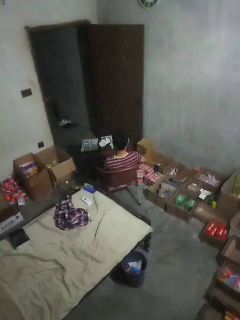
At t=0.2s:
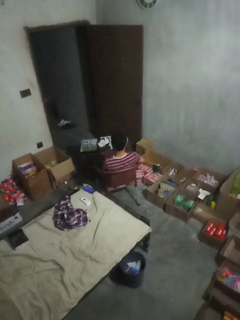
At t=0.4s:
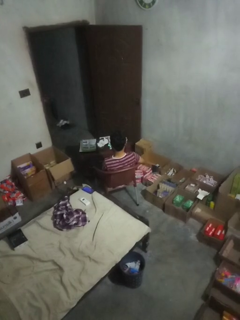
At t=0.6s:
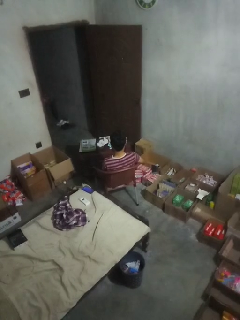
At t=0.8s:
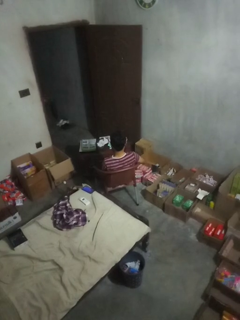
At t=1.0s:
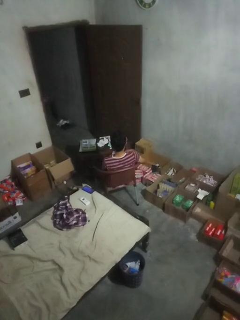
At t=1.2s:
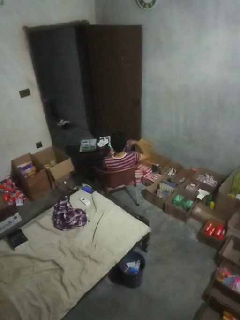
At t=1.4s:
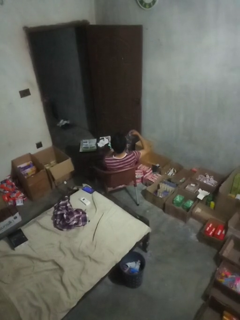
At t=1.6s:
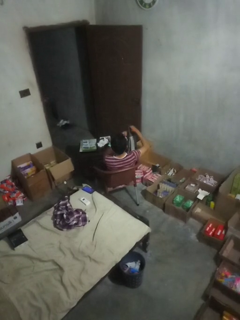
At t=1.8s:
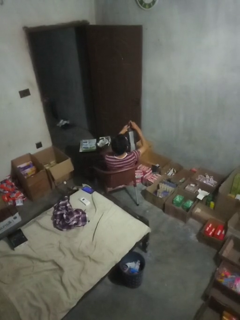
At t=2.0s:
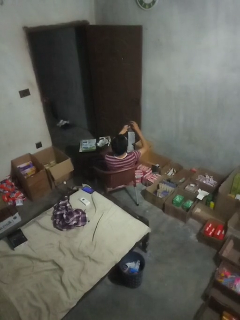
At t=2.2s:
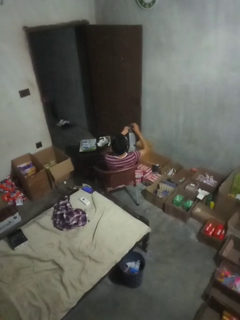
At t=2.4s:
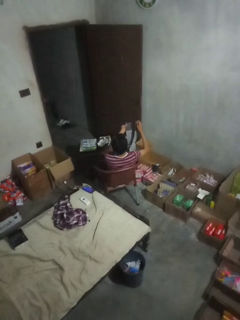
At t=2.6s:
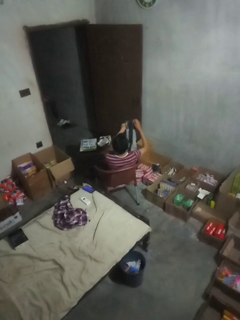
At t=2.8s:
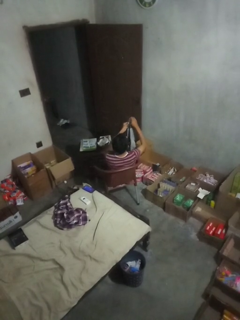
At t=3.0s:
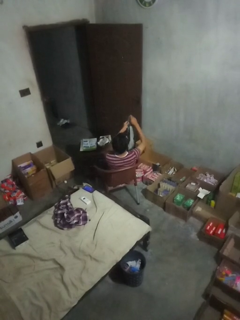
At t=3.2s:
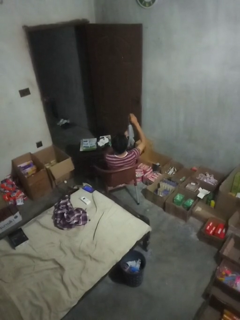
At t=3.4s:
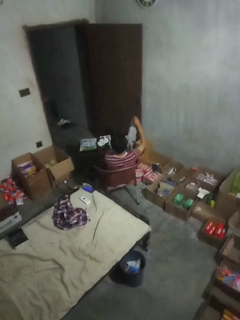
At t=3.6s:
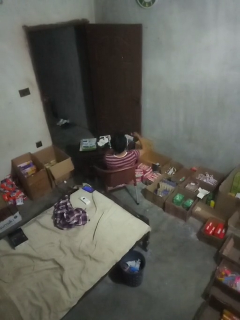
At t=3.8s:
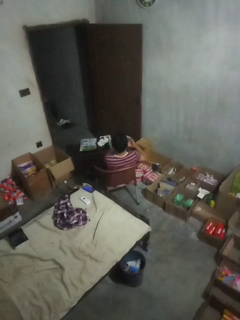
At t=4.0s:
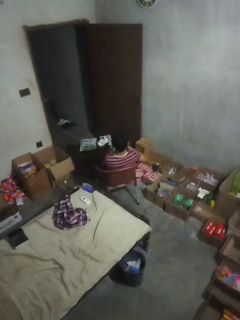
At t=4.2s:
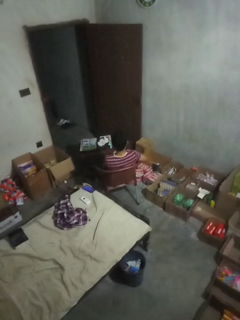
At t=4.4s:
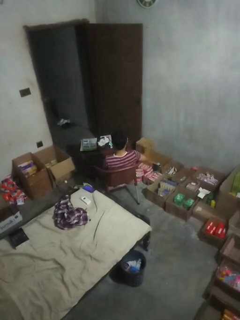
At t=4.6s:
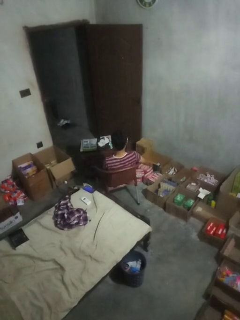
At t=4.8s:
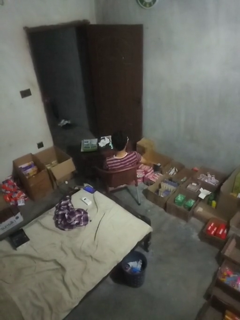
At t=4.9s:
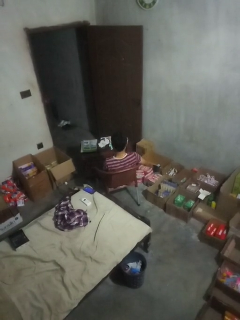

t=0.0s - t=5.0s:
person folds socks

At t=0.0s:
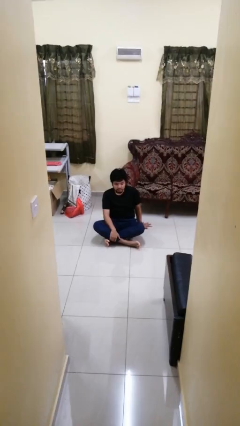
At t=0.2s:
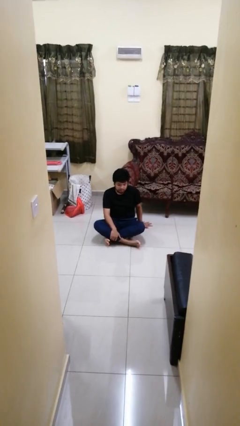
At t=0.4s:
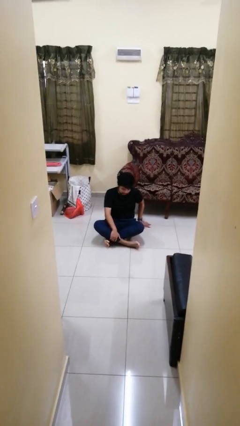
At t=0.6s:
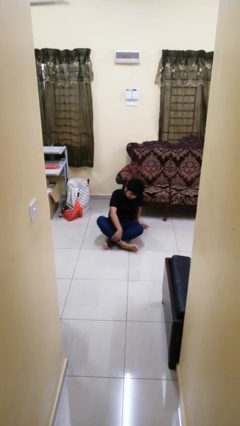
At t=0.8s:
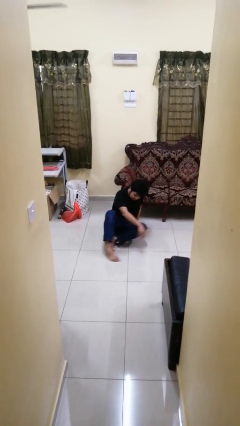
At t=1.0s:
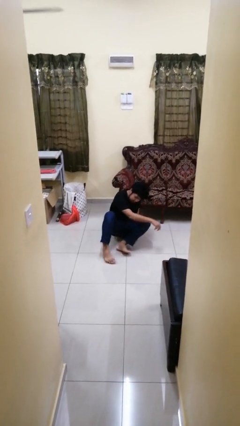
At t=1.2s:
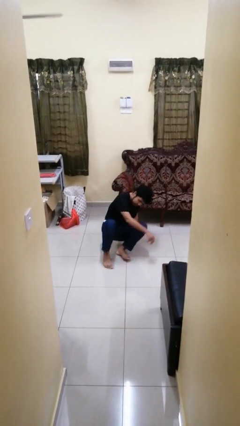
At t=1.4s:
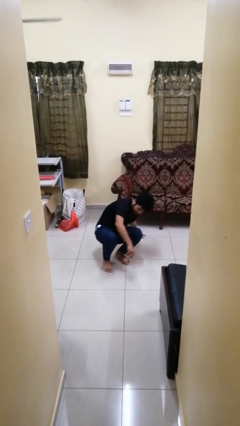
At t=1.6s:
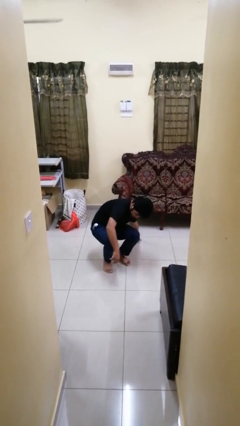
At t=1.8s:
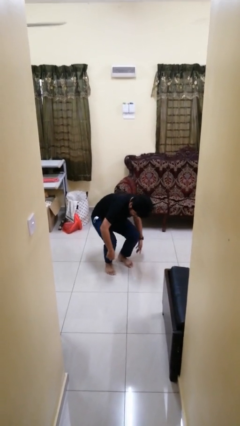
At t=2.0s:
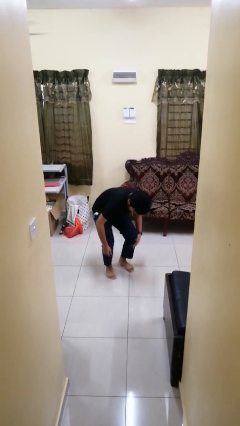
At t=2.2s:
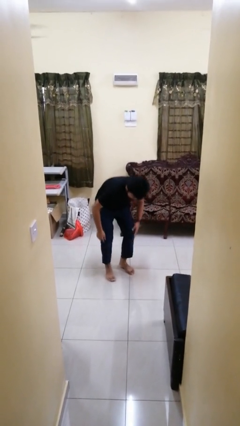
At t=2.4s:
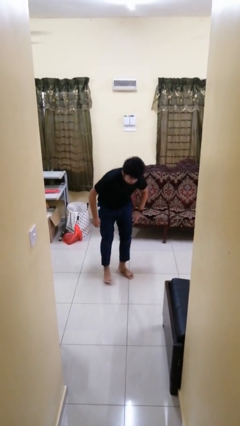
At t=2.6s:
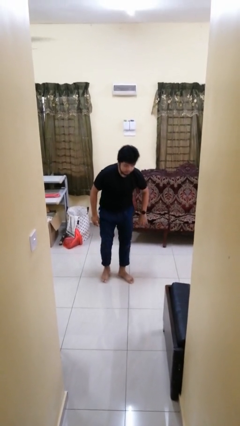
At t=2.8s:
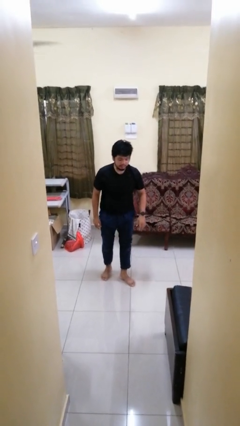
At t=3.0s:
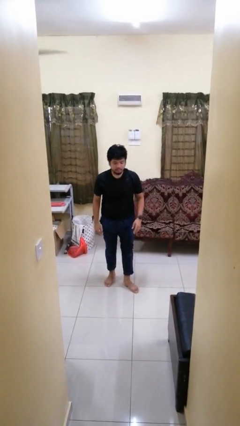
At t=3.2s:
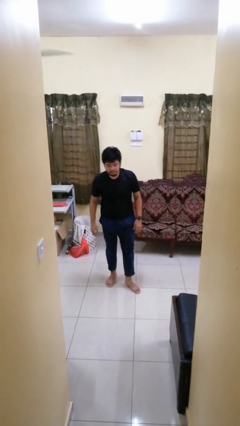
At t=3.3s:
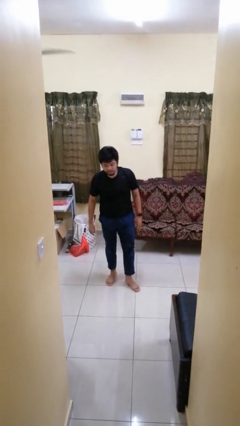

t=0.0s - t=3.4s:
person stands up from floor

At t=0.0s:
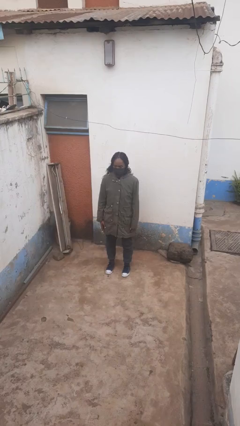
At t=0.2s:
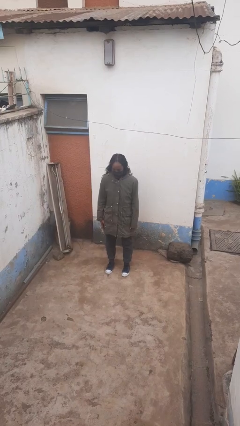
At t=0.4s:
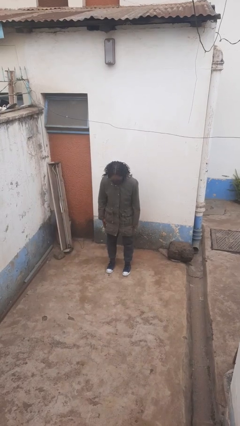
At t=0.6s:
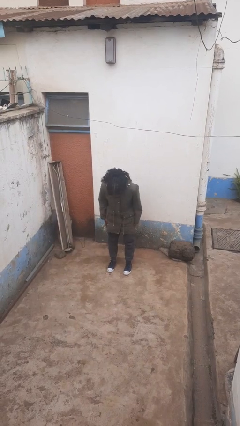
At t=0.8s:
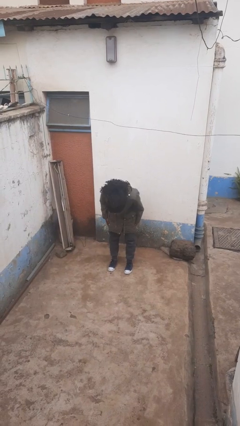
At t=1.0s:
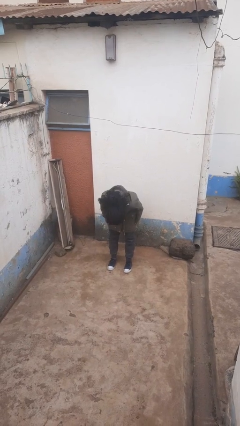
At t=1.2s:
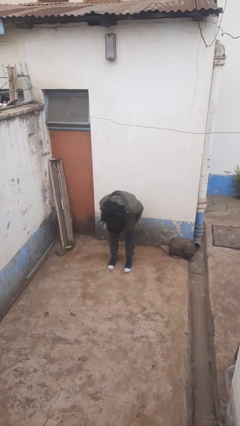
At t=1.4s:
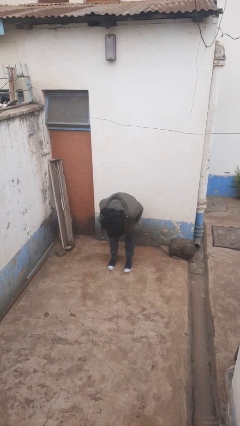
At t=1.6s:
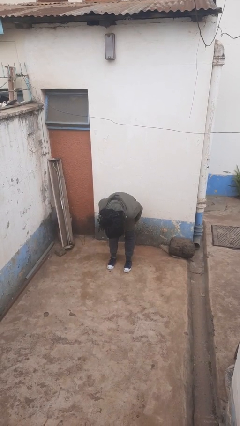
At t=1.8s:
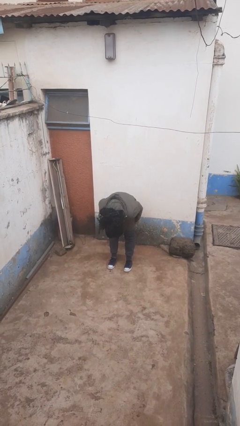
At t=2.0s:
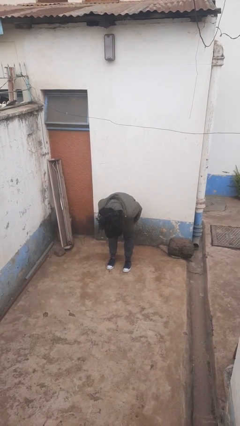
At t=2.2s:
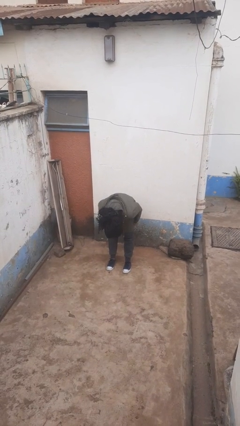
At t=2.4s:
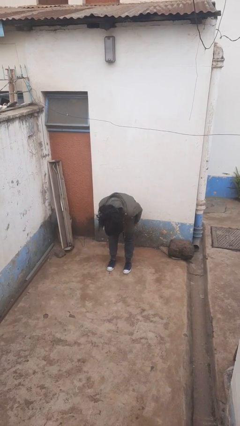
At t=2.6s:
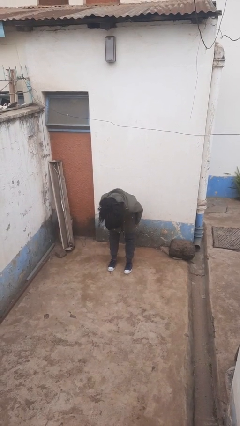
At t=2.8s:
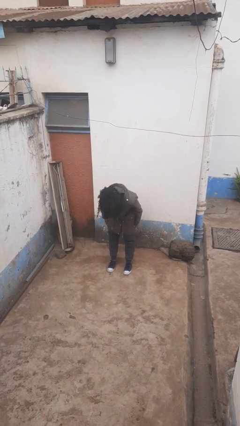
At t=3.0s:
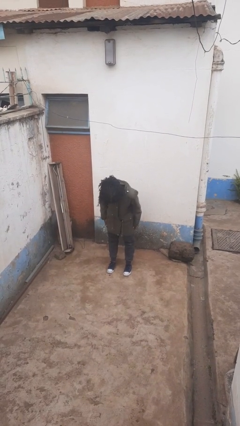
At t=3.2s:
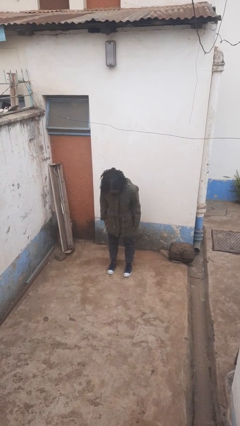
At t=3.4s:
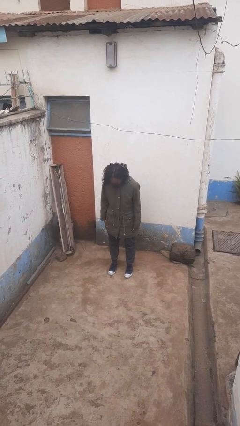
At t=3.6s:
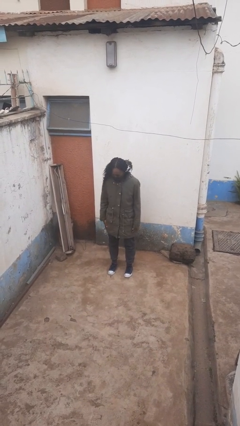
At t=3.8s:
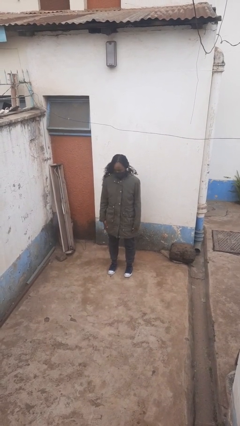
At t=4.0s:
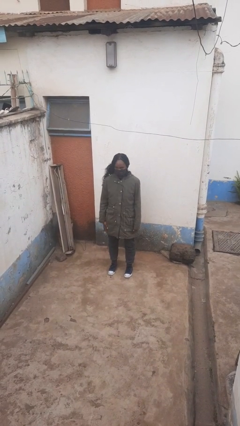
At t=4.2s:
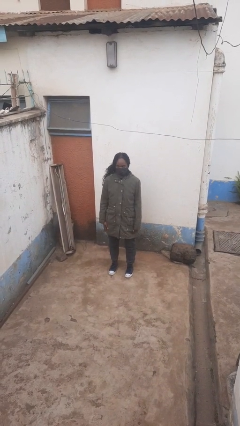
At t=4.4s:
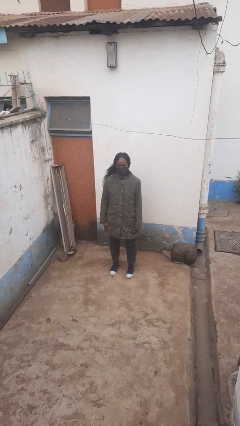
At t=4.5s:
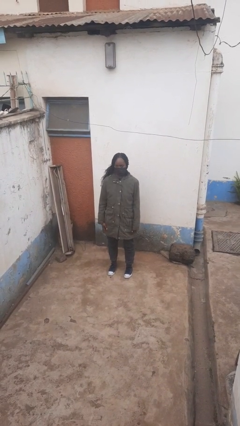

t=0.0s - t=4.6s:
person bows

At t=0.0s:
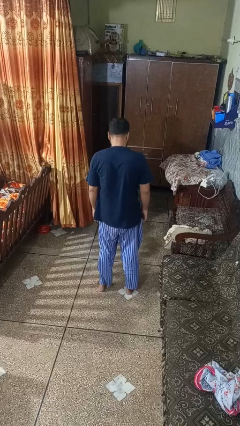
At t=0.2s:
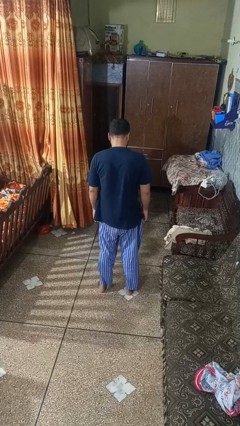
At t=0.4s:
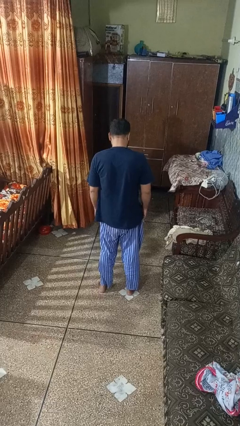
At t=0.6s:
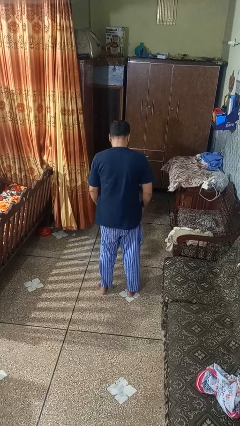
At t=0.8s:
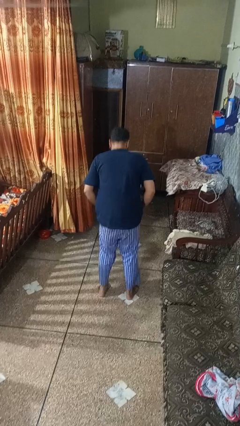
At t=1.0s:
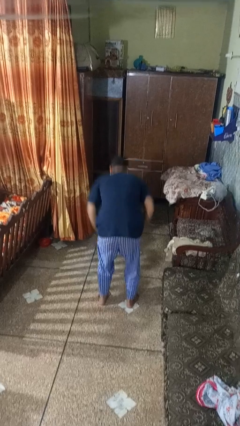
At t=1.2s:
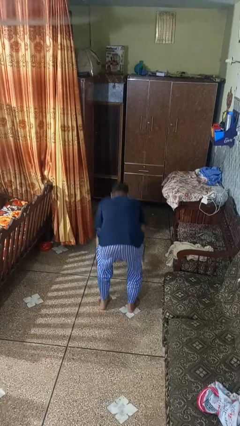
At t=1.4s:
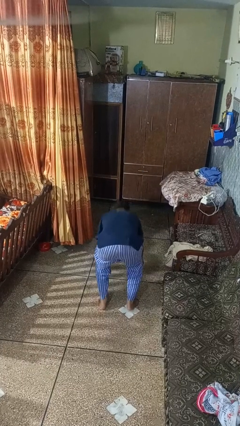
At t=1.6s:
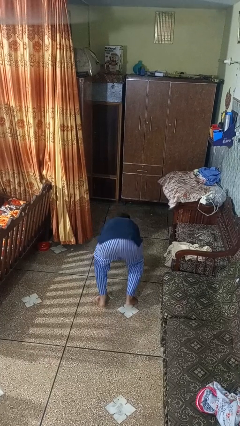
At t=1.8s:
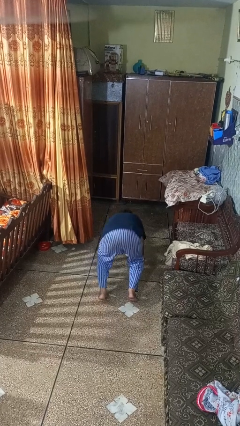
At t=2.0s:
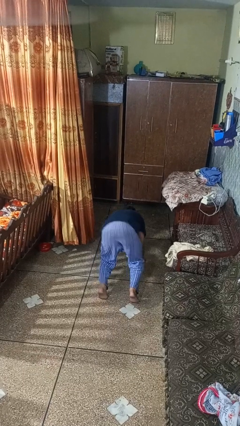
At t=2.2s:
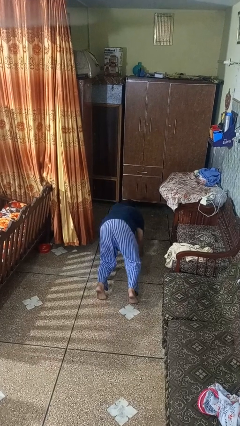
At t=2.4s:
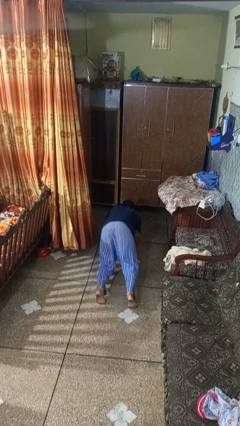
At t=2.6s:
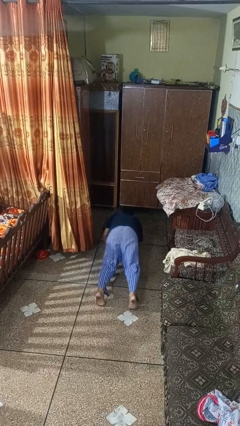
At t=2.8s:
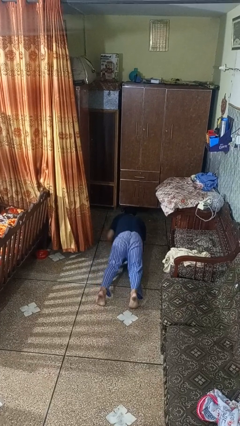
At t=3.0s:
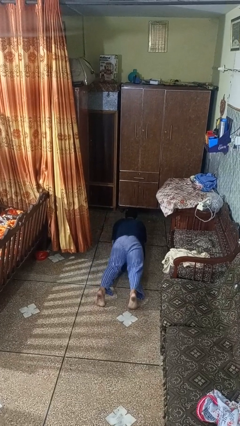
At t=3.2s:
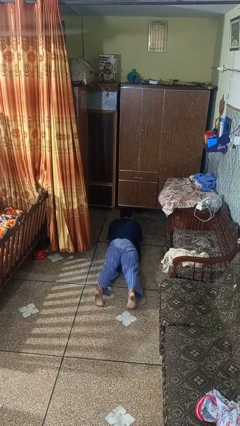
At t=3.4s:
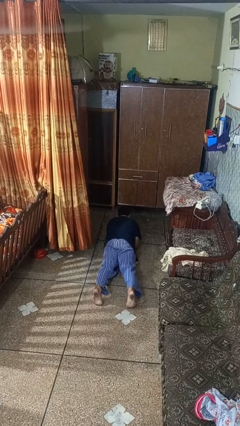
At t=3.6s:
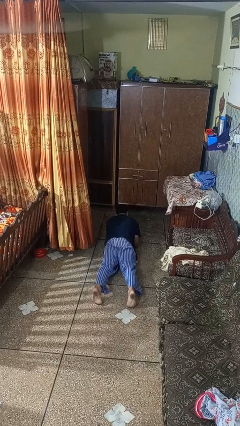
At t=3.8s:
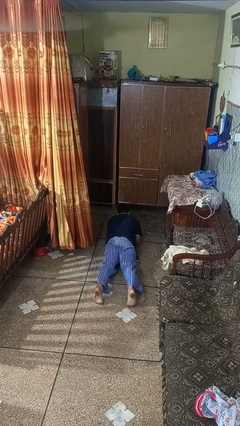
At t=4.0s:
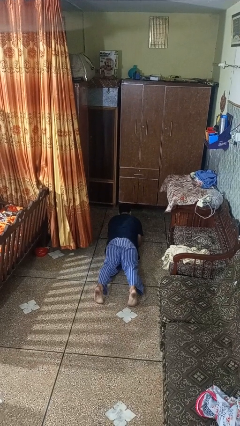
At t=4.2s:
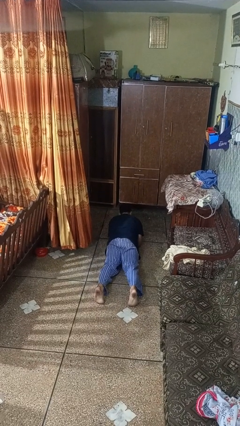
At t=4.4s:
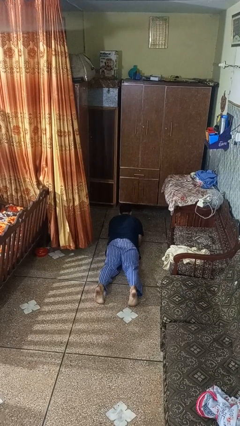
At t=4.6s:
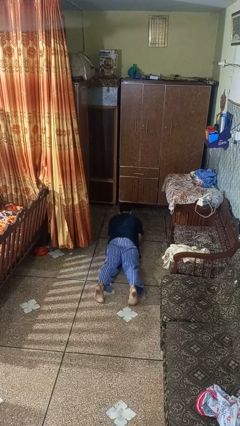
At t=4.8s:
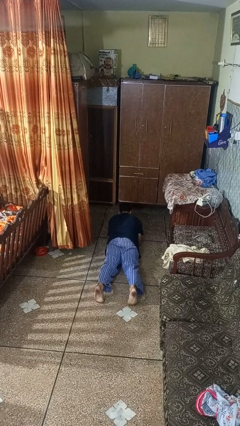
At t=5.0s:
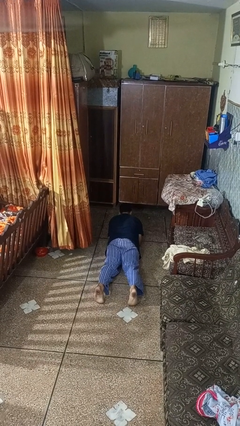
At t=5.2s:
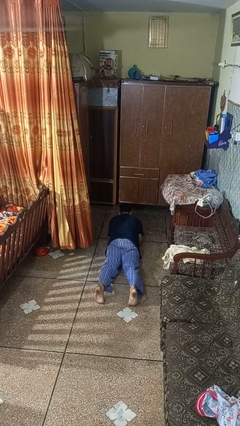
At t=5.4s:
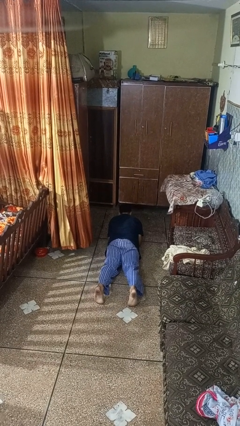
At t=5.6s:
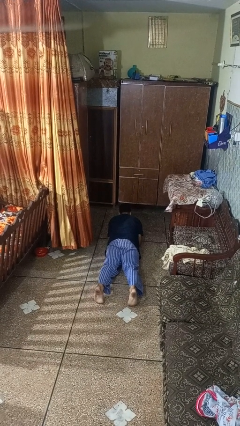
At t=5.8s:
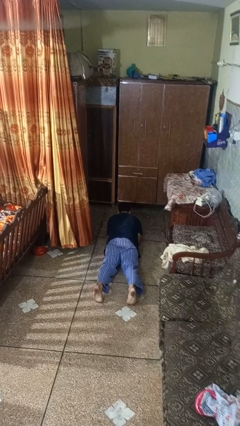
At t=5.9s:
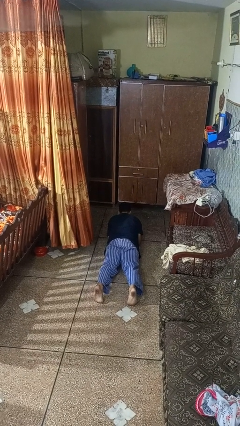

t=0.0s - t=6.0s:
person exercises with plank
